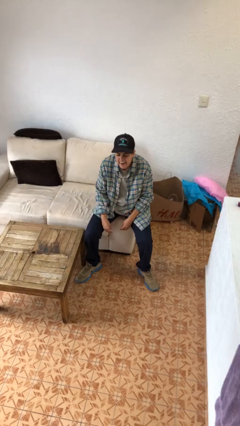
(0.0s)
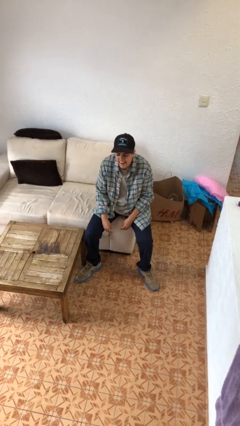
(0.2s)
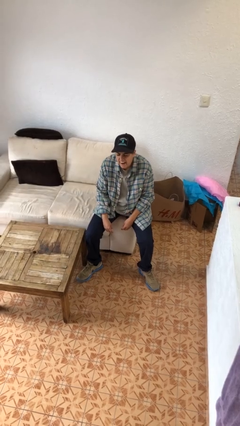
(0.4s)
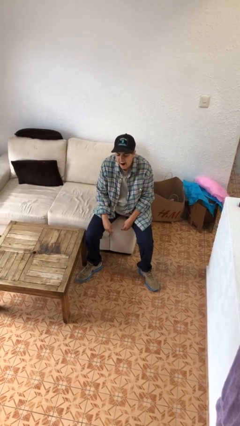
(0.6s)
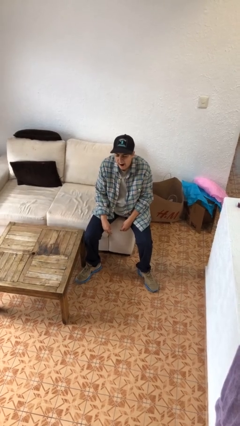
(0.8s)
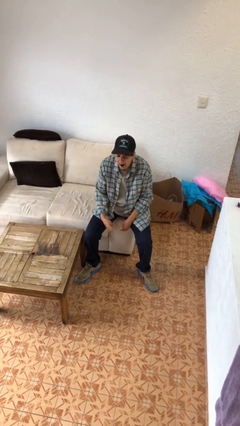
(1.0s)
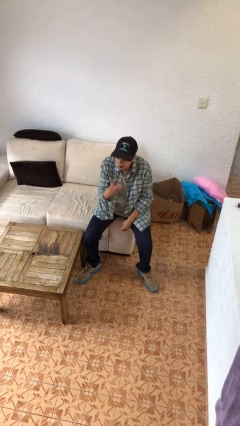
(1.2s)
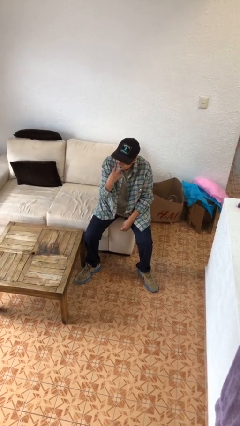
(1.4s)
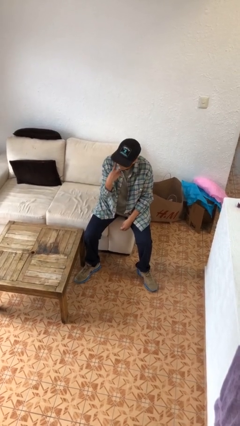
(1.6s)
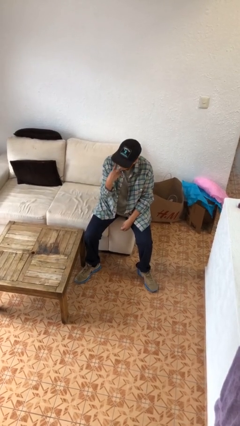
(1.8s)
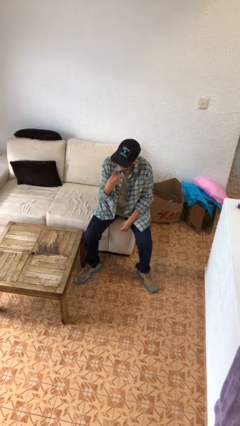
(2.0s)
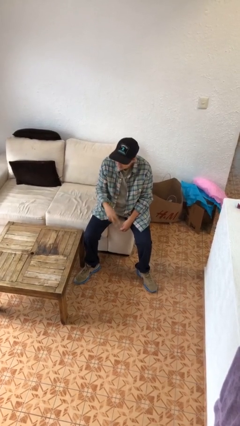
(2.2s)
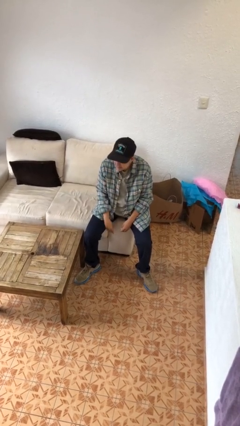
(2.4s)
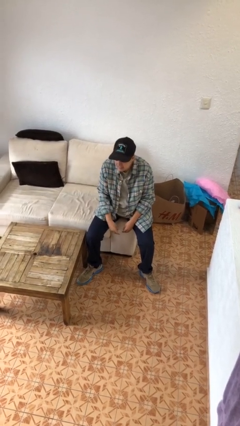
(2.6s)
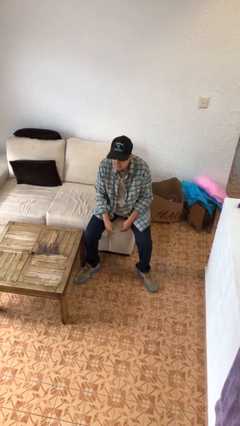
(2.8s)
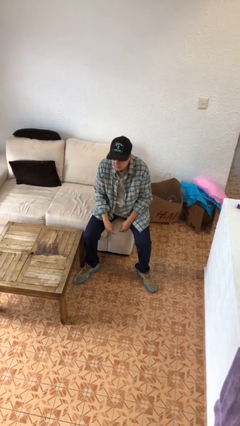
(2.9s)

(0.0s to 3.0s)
person gestures watch closely

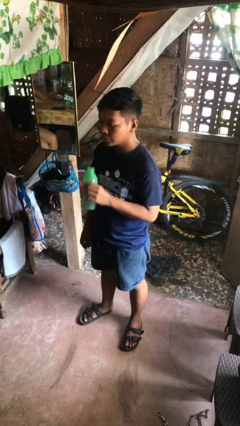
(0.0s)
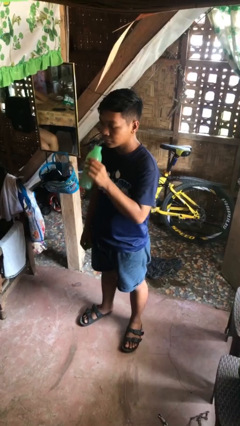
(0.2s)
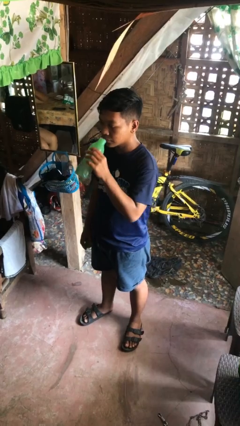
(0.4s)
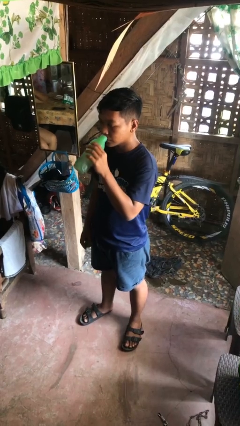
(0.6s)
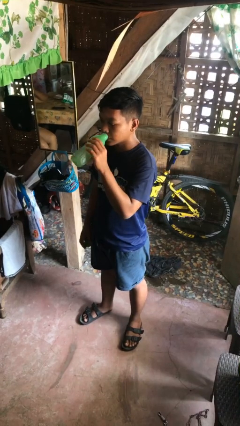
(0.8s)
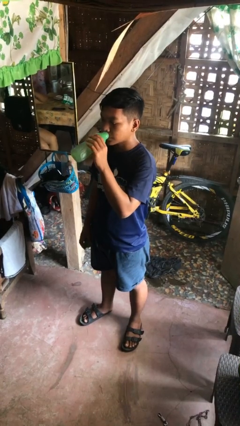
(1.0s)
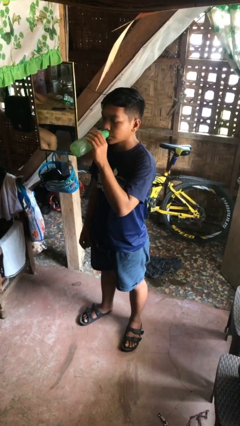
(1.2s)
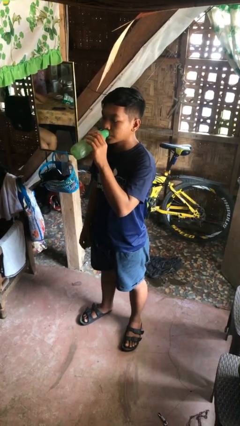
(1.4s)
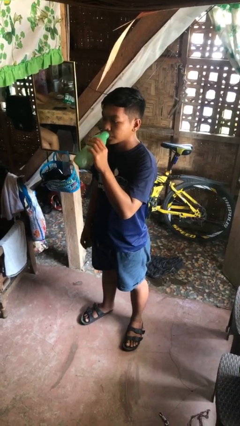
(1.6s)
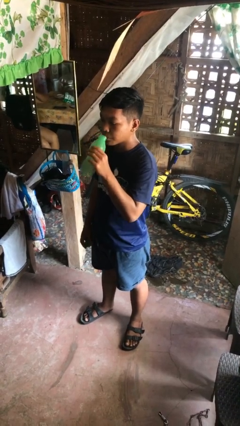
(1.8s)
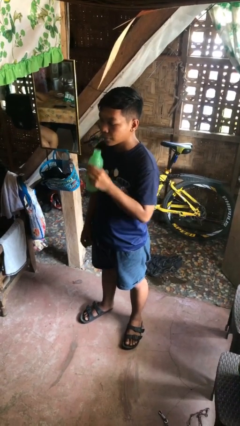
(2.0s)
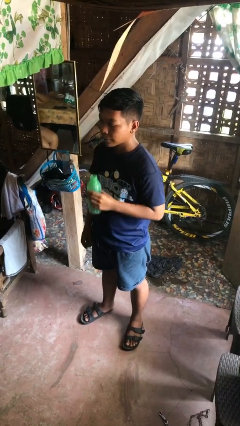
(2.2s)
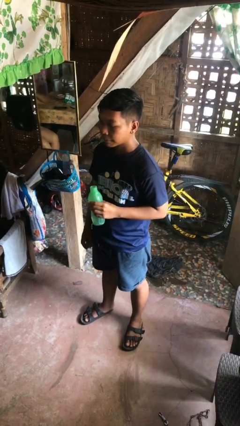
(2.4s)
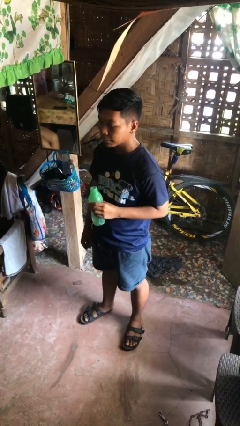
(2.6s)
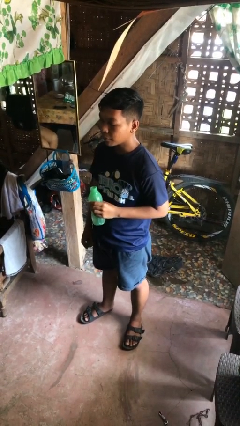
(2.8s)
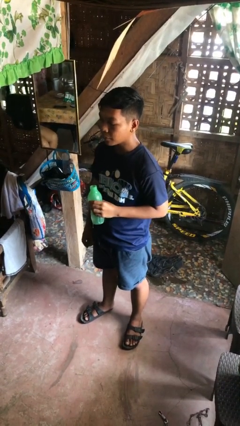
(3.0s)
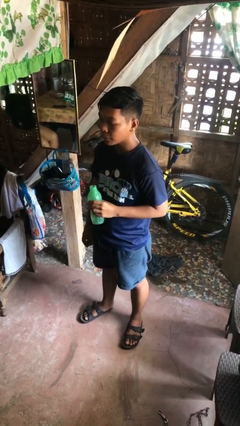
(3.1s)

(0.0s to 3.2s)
person drinks from bottle

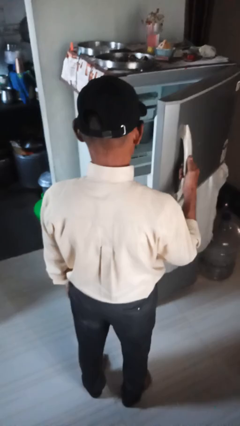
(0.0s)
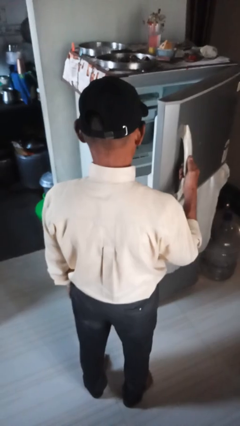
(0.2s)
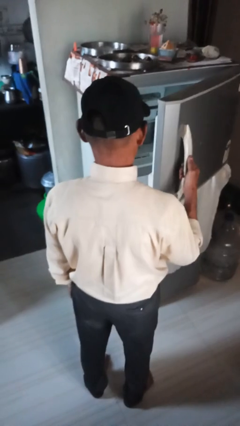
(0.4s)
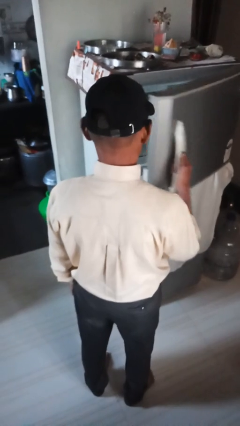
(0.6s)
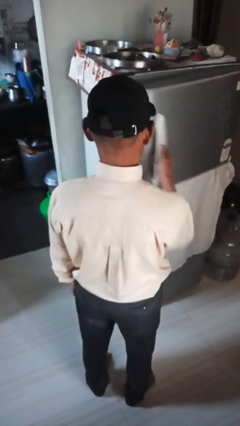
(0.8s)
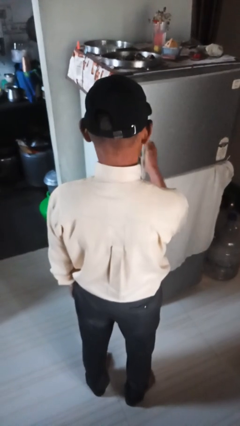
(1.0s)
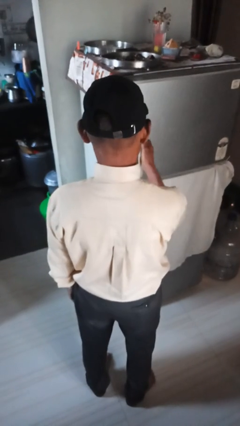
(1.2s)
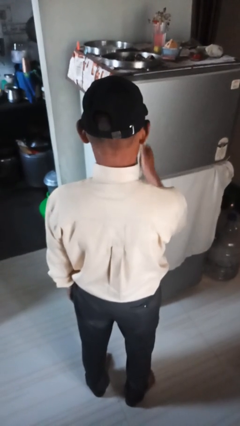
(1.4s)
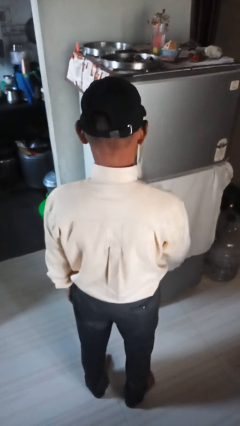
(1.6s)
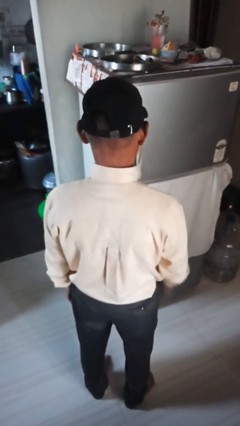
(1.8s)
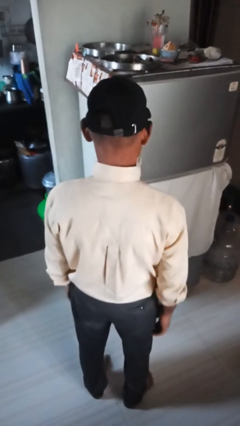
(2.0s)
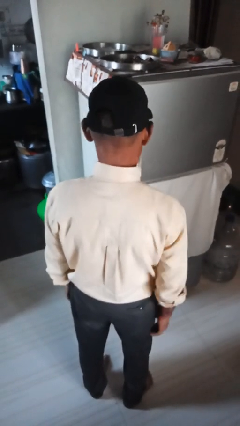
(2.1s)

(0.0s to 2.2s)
person closes clothes washer

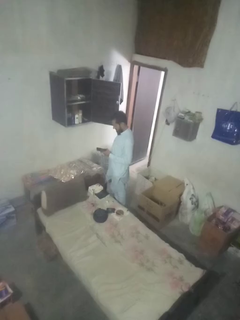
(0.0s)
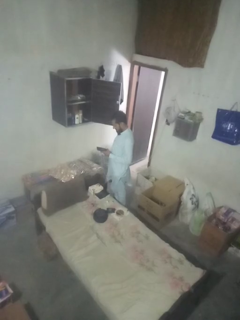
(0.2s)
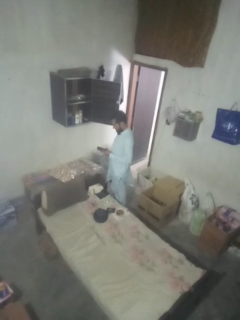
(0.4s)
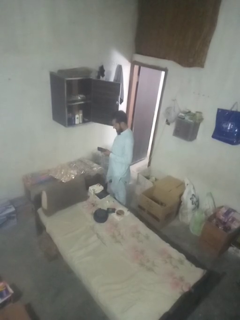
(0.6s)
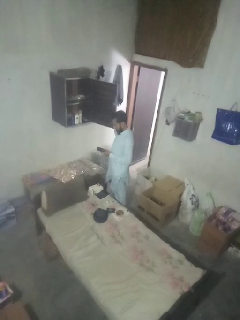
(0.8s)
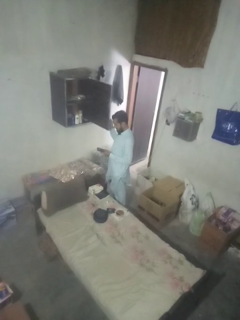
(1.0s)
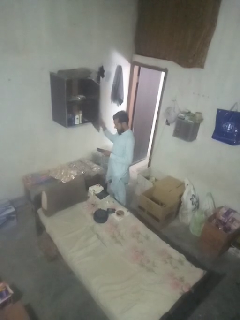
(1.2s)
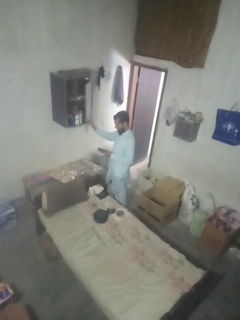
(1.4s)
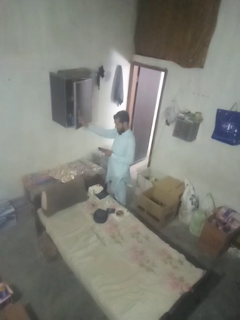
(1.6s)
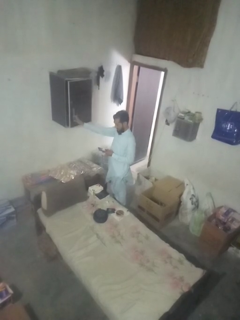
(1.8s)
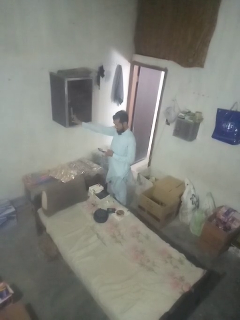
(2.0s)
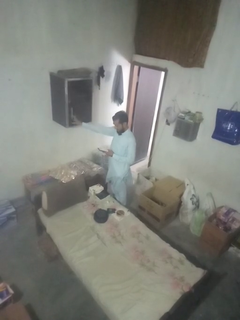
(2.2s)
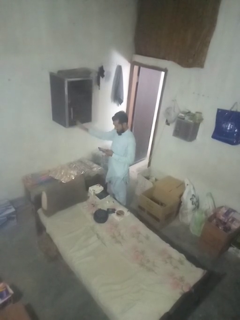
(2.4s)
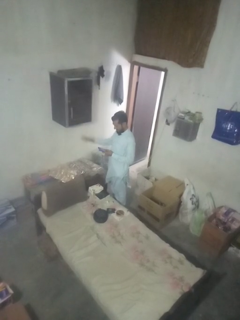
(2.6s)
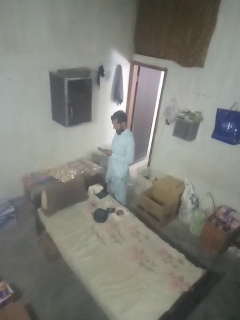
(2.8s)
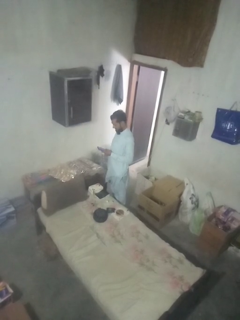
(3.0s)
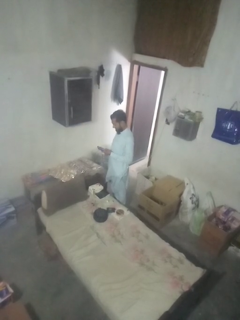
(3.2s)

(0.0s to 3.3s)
person closes dresser drawer

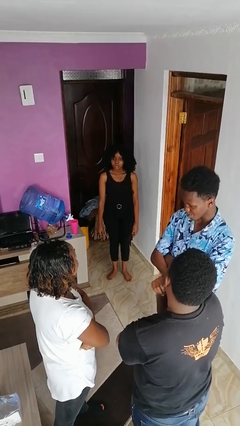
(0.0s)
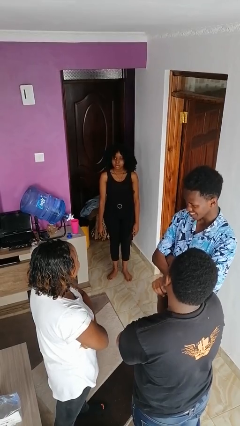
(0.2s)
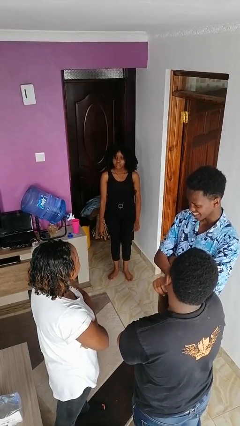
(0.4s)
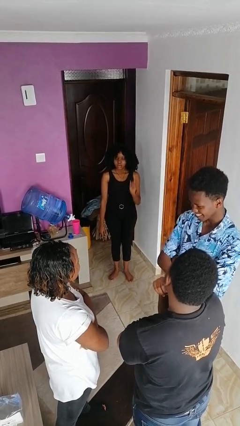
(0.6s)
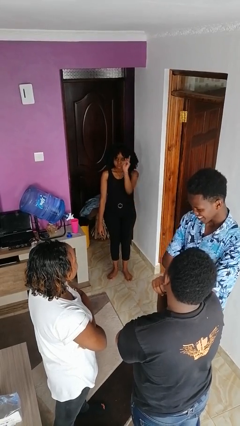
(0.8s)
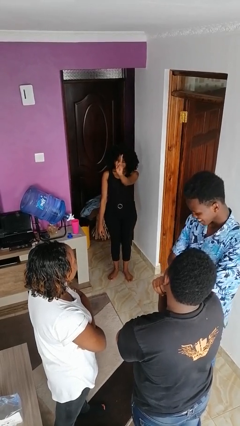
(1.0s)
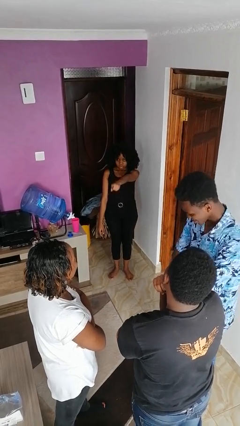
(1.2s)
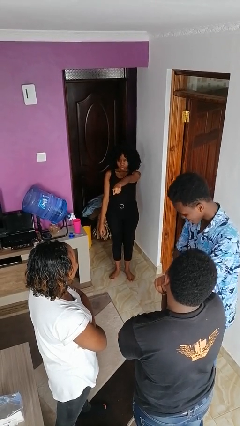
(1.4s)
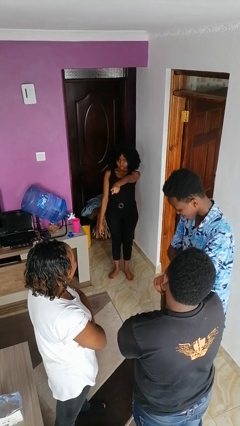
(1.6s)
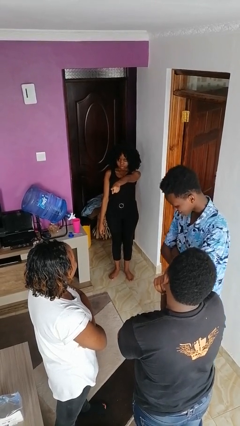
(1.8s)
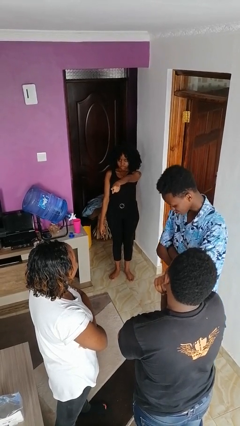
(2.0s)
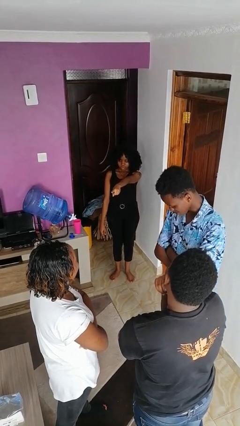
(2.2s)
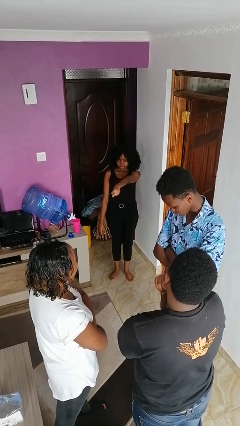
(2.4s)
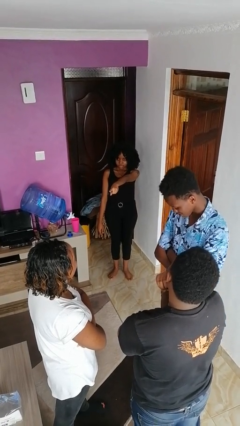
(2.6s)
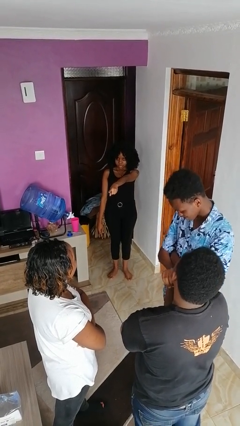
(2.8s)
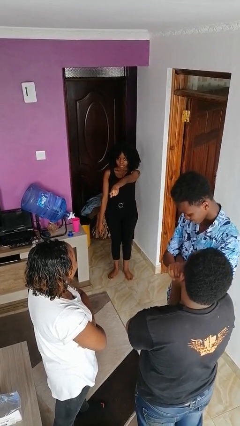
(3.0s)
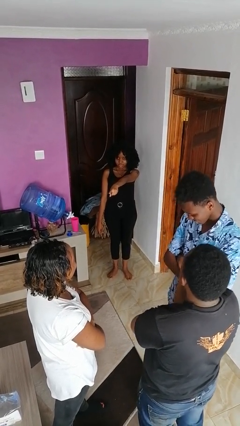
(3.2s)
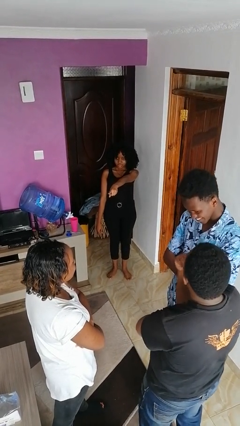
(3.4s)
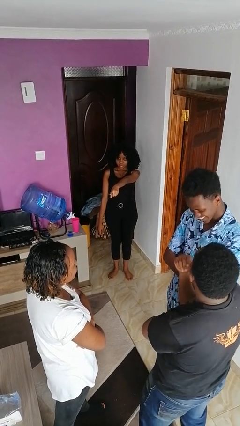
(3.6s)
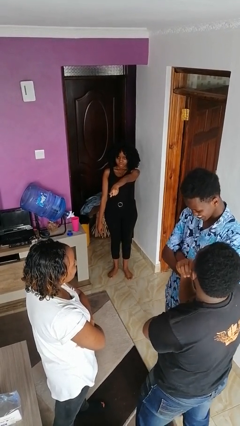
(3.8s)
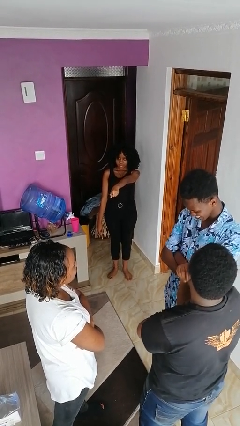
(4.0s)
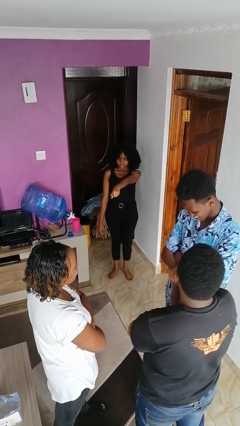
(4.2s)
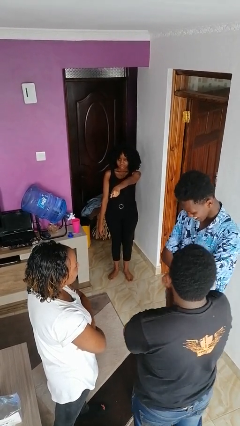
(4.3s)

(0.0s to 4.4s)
person points at person

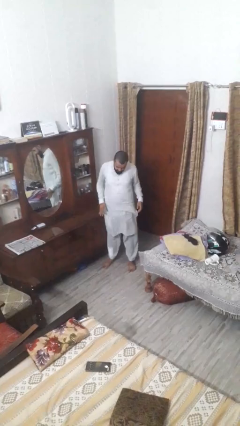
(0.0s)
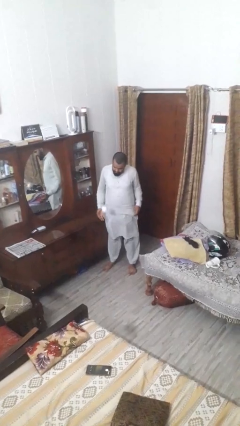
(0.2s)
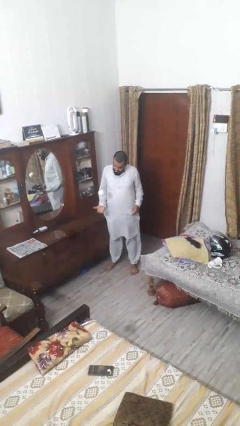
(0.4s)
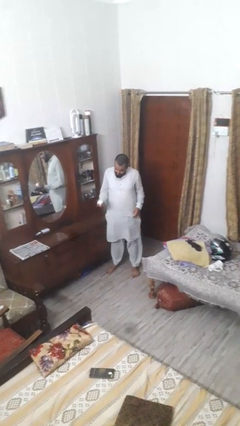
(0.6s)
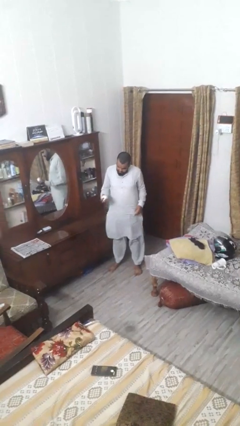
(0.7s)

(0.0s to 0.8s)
person bounces ball on floor

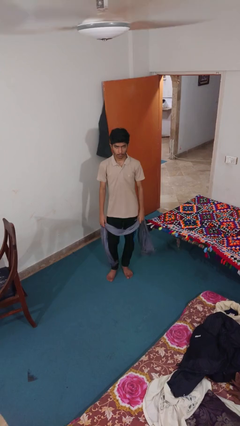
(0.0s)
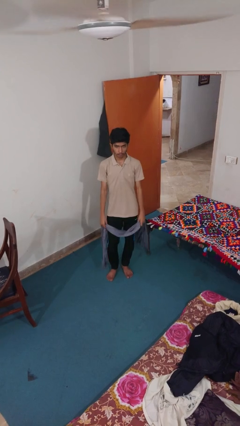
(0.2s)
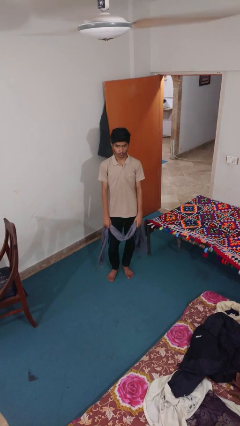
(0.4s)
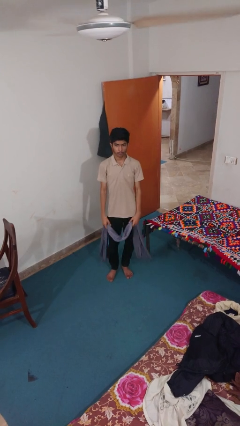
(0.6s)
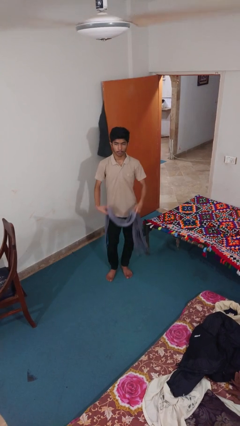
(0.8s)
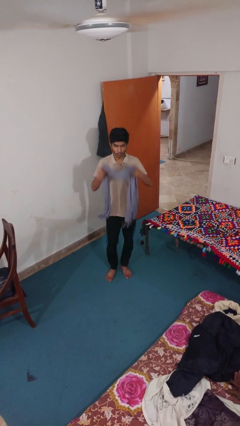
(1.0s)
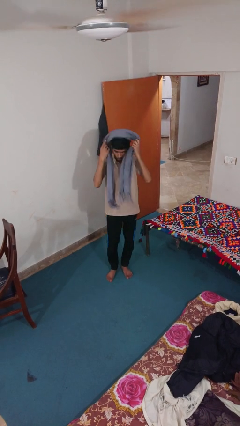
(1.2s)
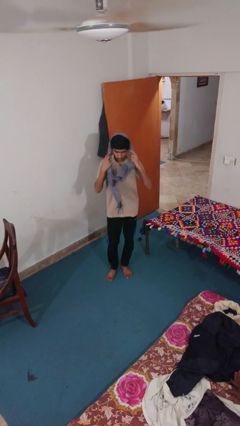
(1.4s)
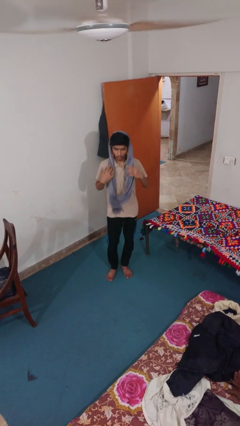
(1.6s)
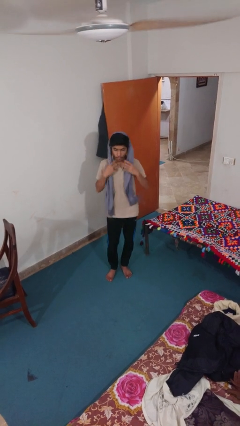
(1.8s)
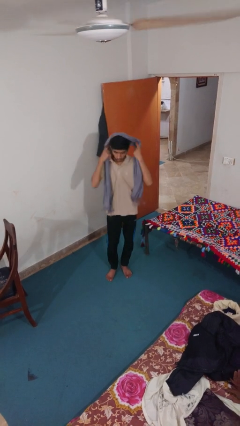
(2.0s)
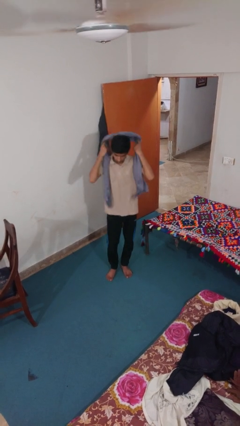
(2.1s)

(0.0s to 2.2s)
person puts on scarf
